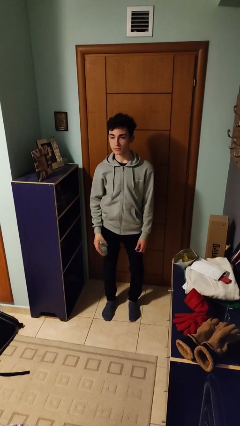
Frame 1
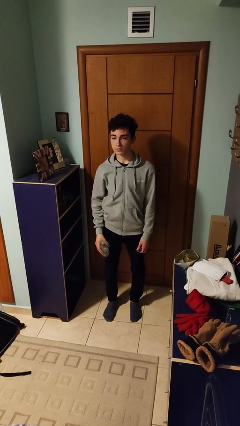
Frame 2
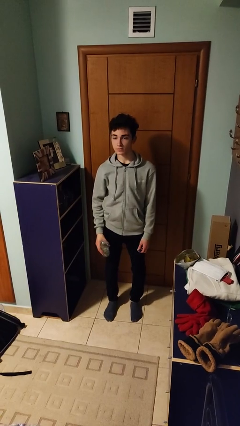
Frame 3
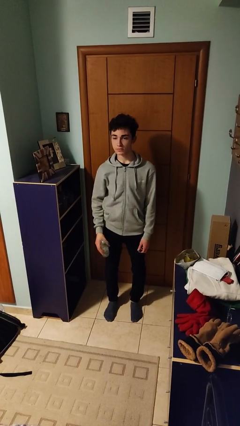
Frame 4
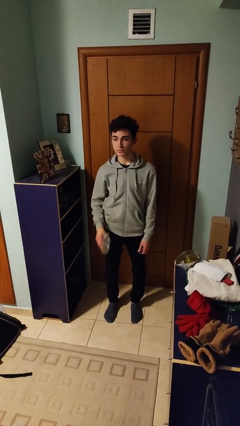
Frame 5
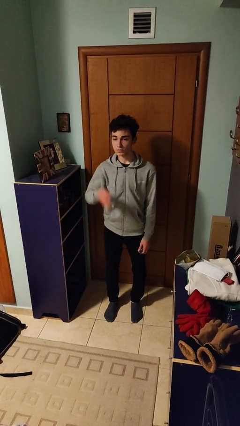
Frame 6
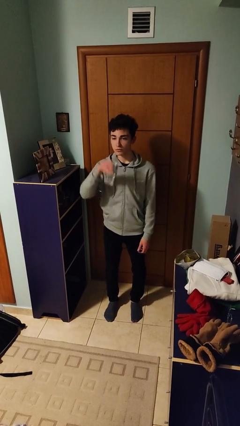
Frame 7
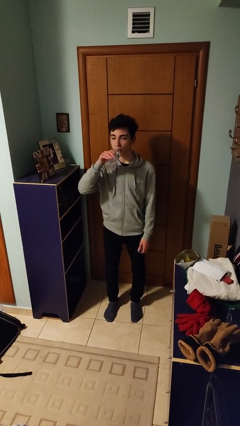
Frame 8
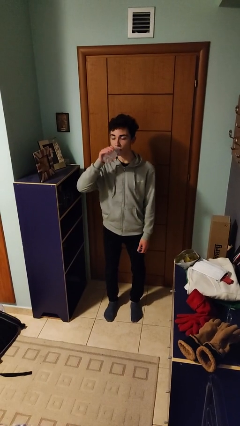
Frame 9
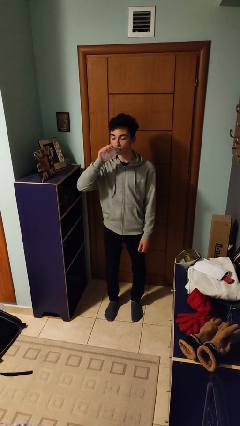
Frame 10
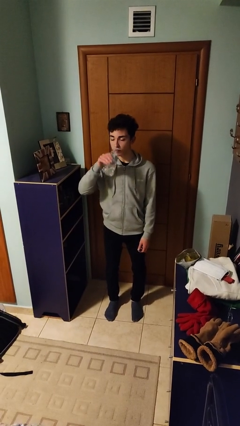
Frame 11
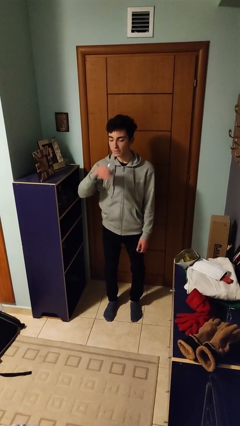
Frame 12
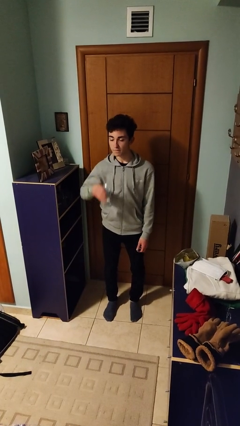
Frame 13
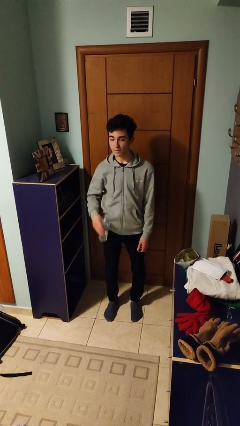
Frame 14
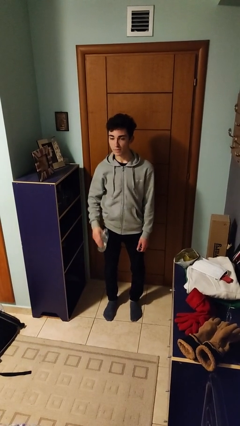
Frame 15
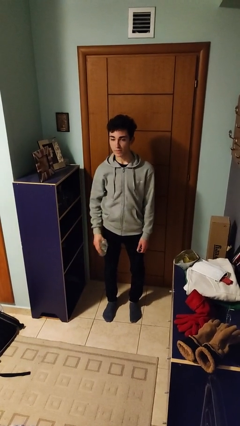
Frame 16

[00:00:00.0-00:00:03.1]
person drinks from bottle

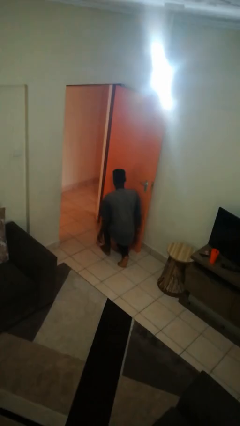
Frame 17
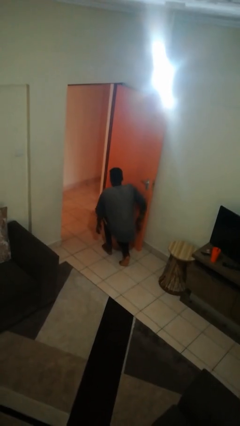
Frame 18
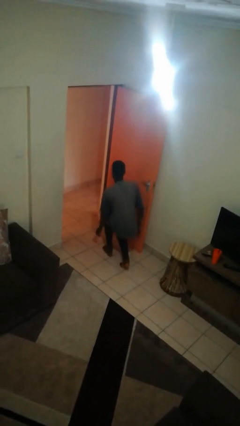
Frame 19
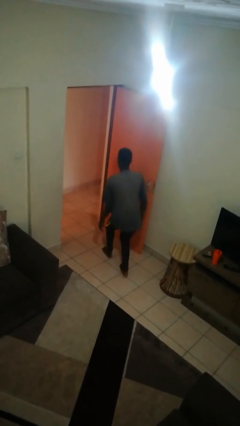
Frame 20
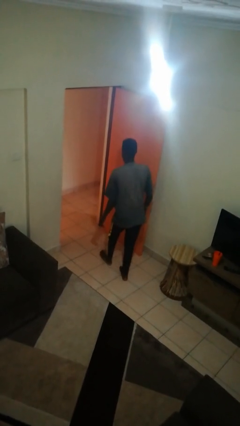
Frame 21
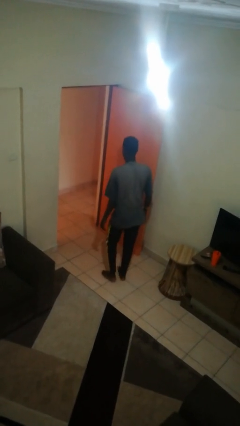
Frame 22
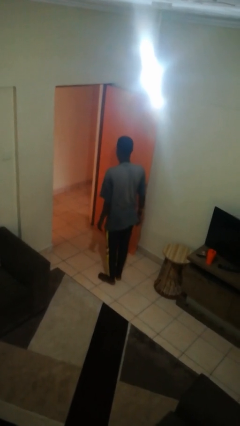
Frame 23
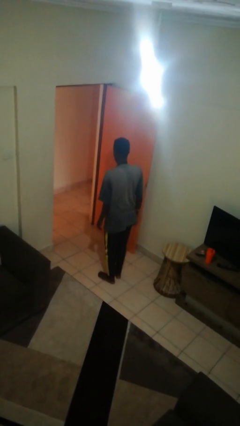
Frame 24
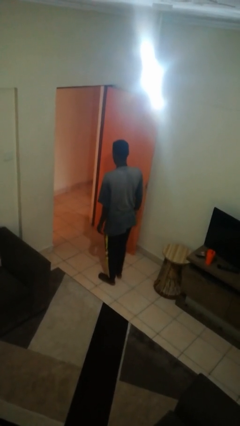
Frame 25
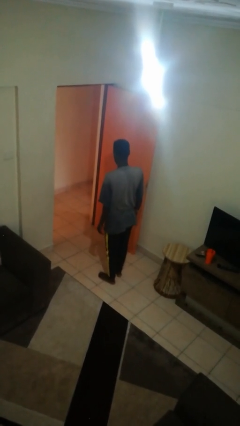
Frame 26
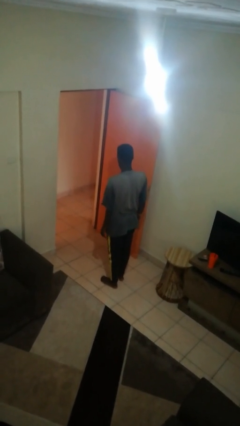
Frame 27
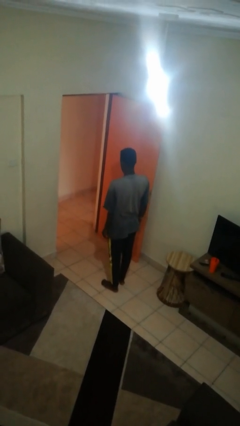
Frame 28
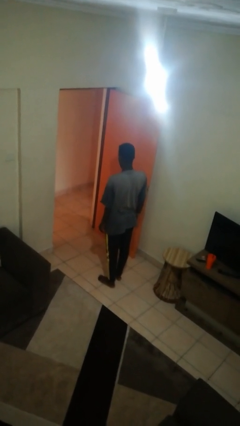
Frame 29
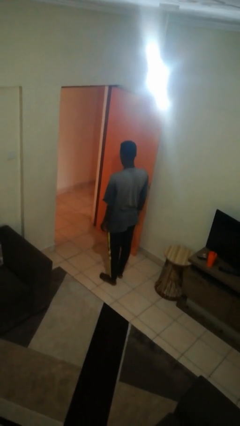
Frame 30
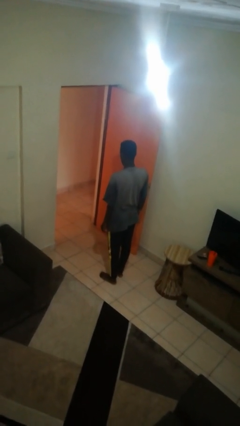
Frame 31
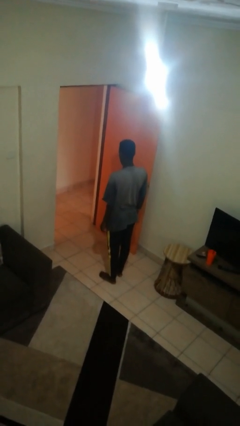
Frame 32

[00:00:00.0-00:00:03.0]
person stands up from floor

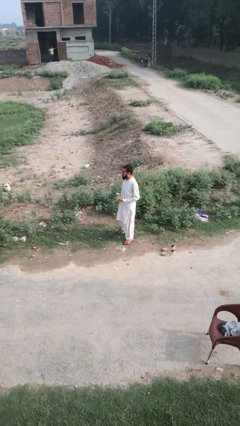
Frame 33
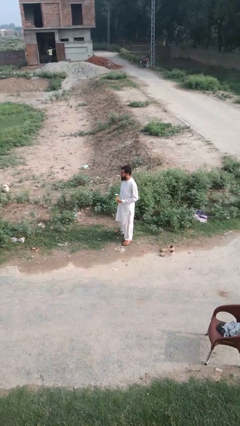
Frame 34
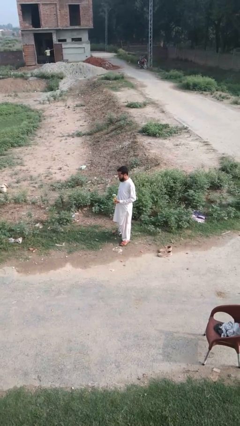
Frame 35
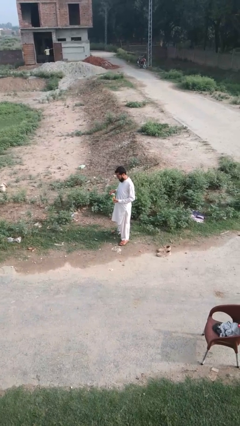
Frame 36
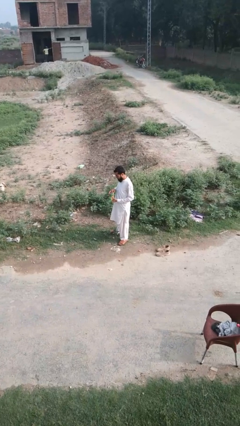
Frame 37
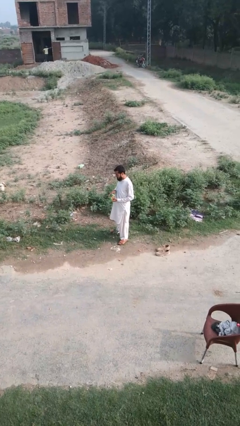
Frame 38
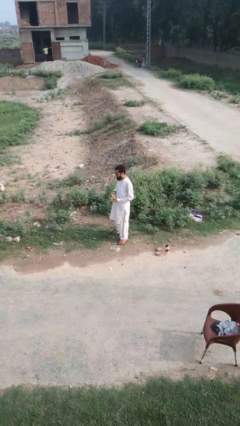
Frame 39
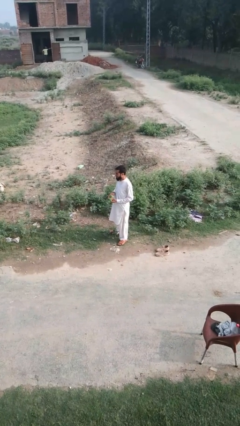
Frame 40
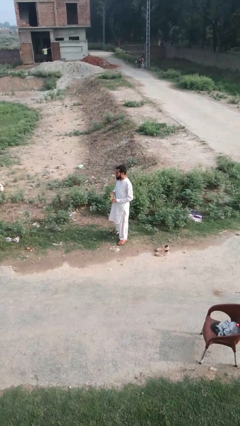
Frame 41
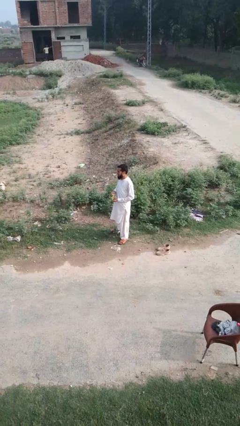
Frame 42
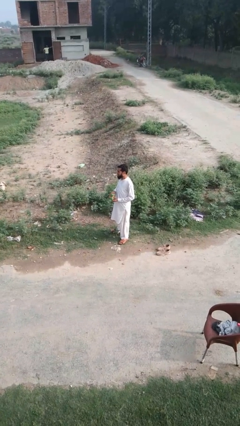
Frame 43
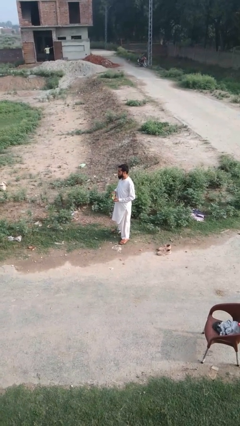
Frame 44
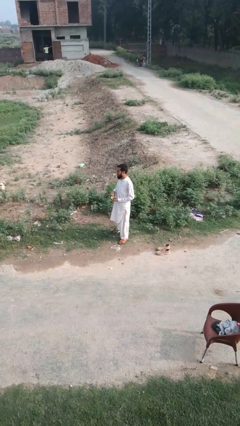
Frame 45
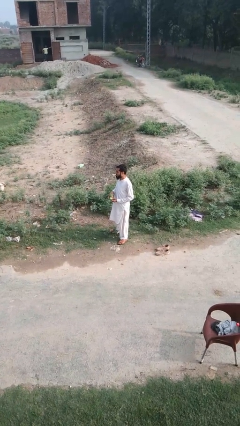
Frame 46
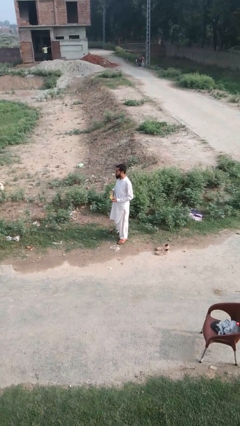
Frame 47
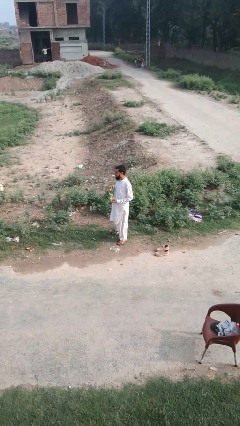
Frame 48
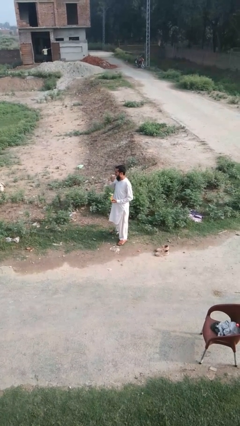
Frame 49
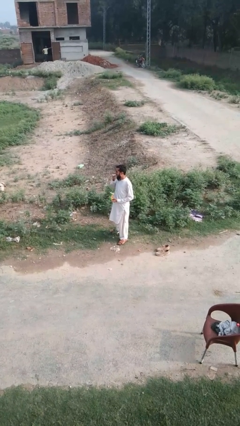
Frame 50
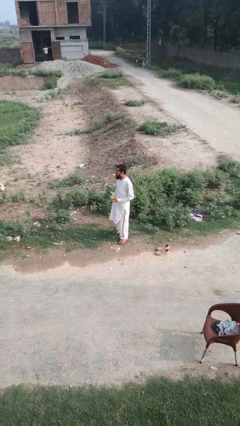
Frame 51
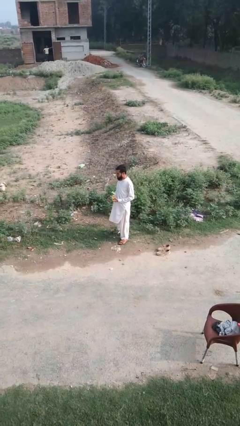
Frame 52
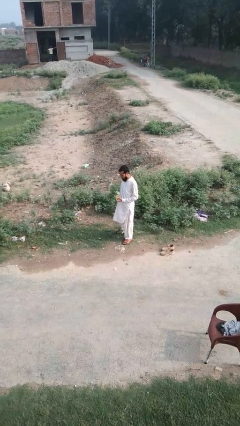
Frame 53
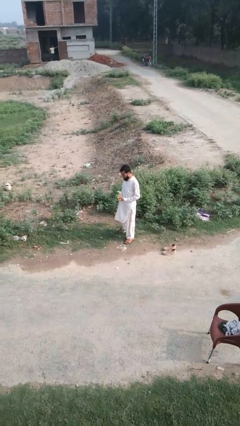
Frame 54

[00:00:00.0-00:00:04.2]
person eats snack from bag

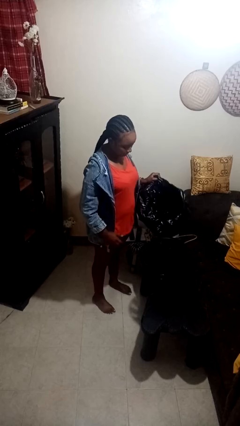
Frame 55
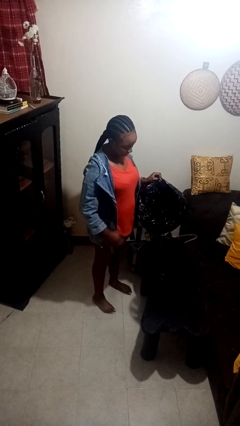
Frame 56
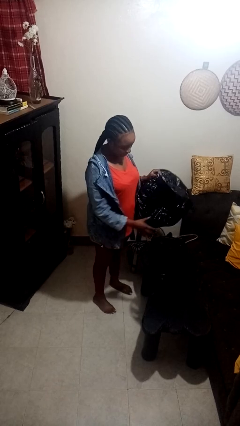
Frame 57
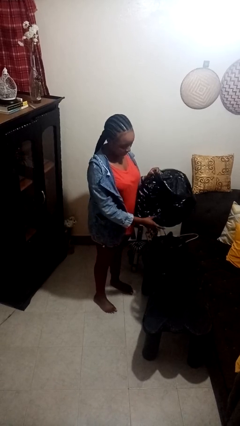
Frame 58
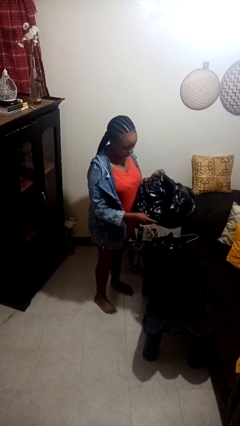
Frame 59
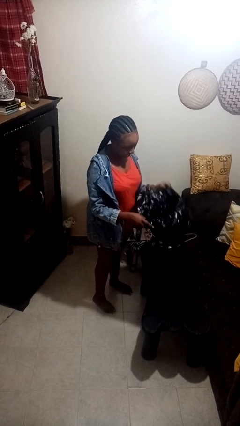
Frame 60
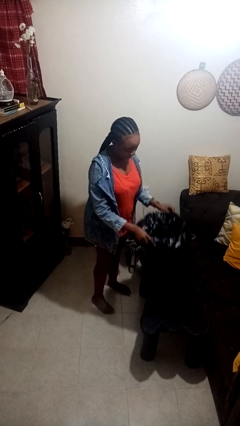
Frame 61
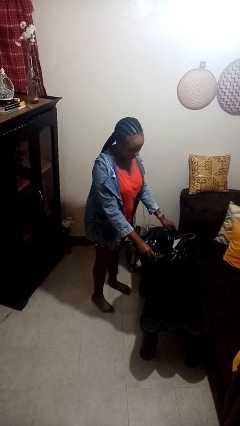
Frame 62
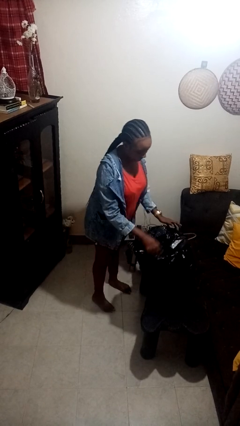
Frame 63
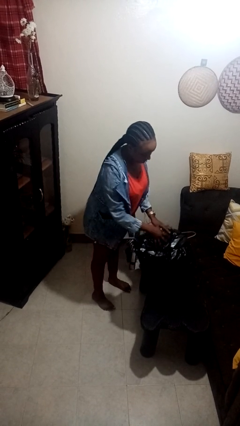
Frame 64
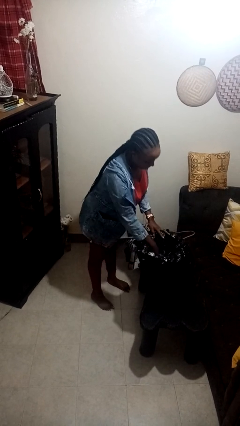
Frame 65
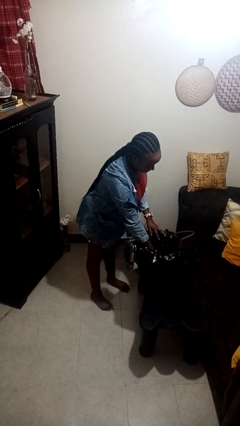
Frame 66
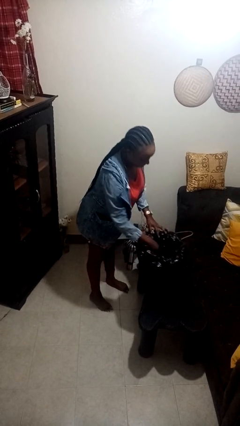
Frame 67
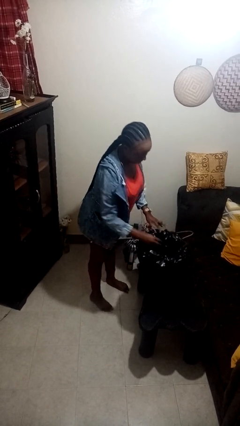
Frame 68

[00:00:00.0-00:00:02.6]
person inserts trashbag into trashcan

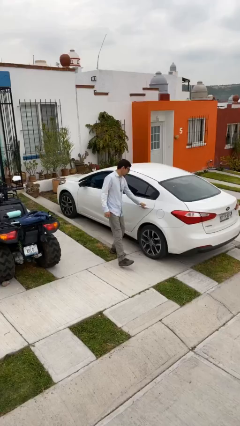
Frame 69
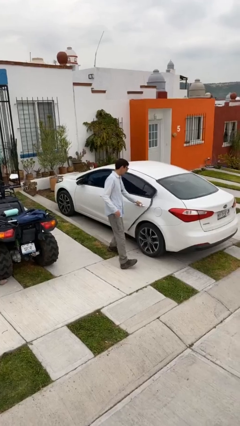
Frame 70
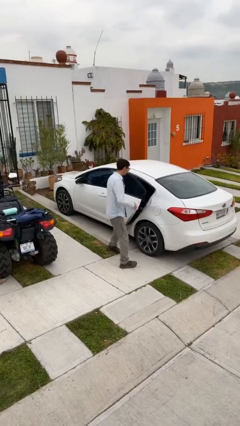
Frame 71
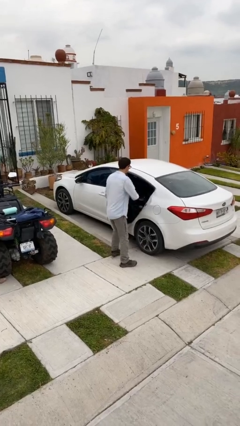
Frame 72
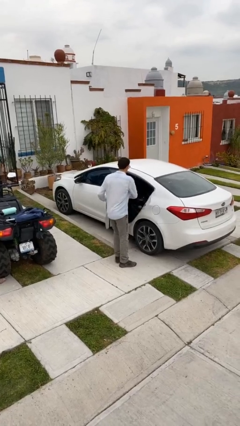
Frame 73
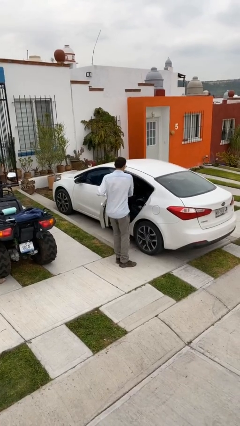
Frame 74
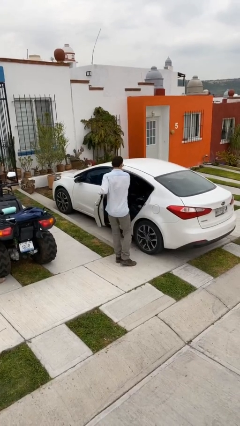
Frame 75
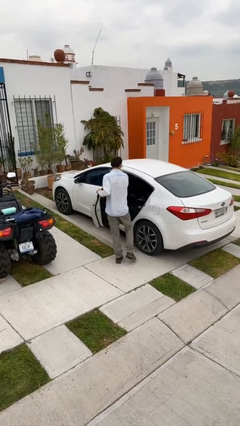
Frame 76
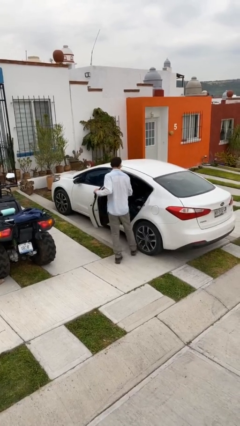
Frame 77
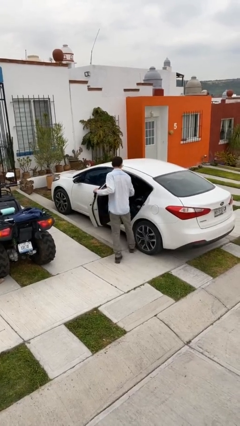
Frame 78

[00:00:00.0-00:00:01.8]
person opens car door

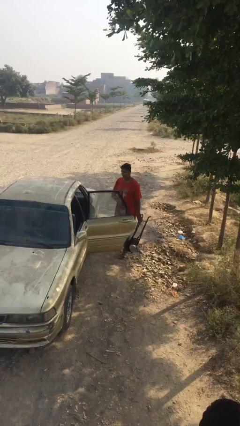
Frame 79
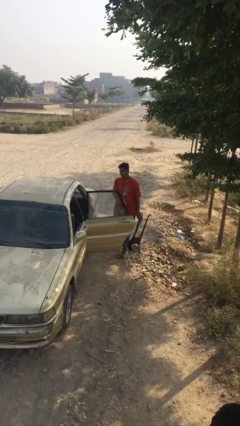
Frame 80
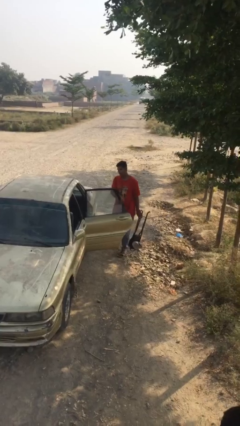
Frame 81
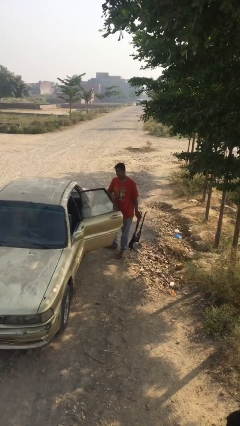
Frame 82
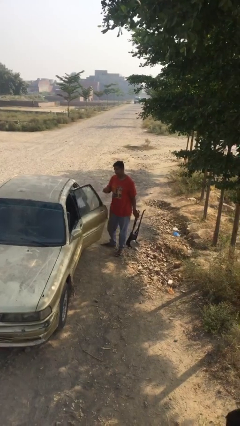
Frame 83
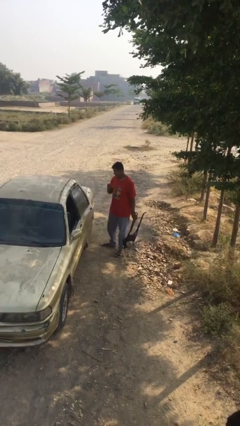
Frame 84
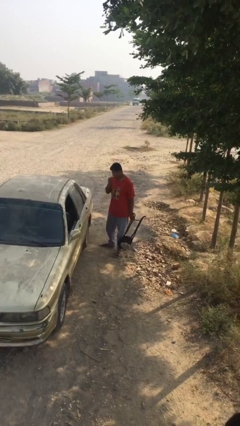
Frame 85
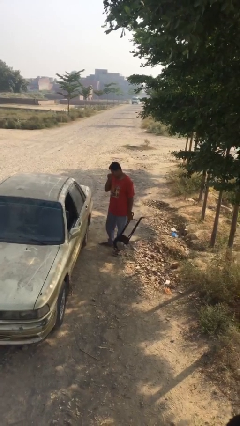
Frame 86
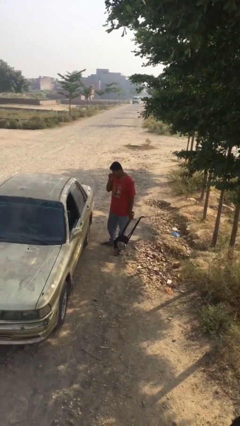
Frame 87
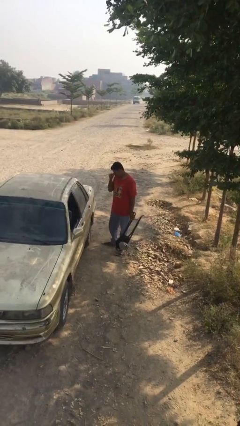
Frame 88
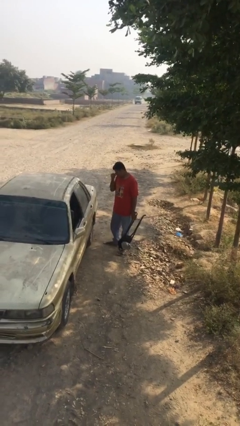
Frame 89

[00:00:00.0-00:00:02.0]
person closes car door

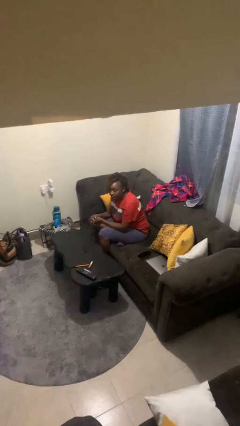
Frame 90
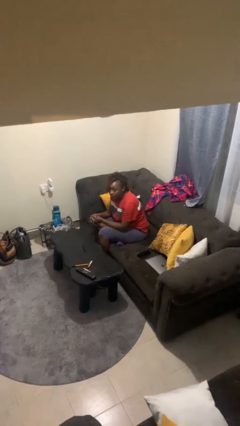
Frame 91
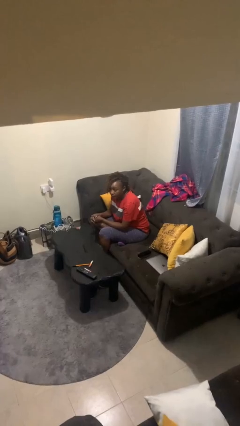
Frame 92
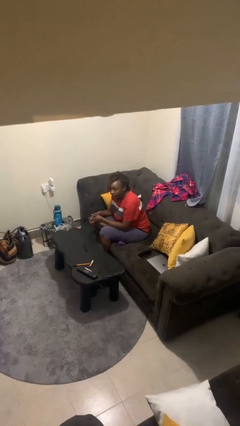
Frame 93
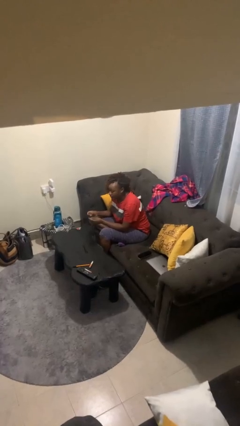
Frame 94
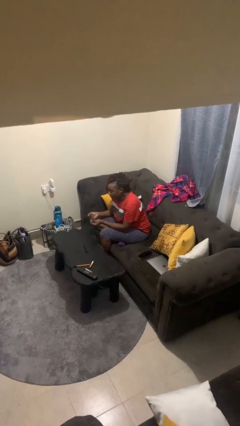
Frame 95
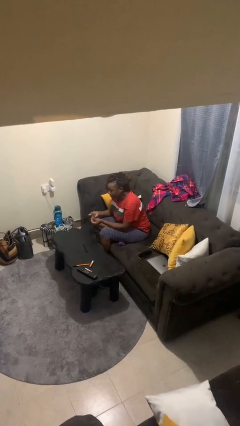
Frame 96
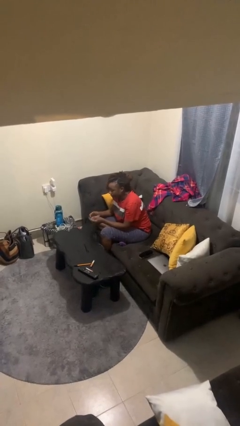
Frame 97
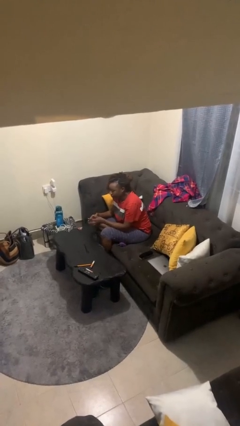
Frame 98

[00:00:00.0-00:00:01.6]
person snaps fingers
